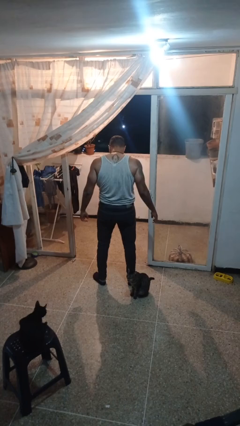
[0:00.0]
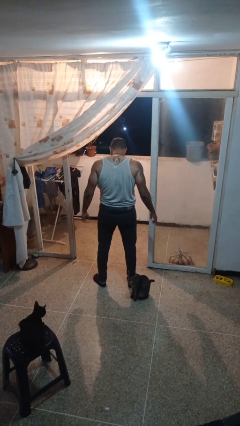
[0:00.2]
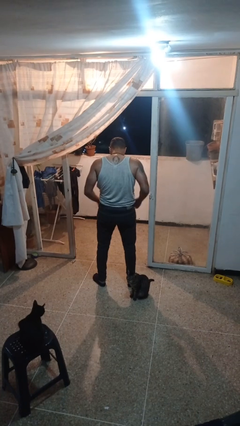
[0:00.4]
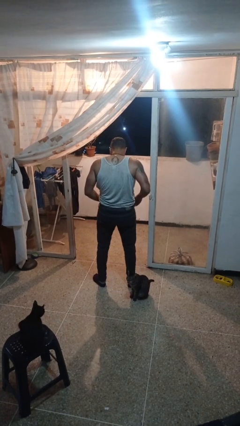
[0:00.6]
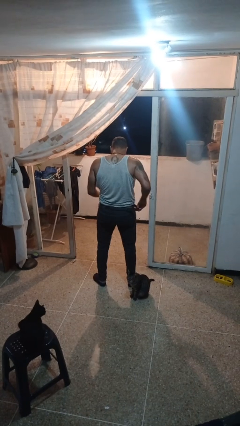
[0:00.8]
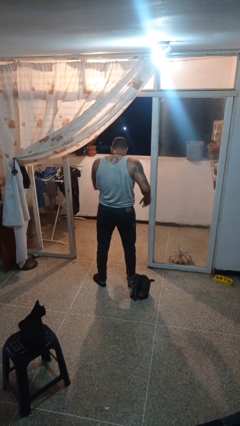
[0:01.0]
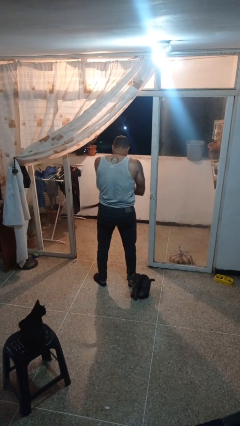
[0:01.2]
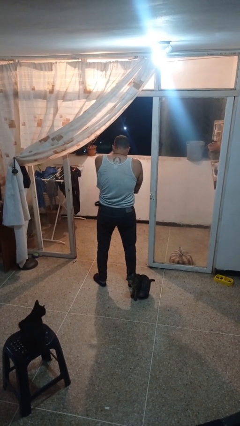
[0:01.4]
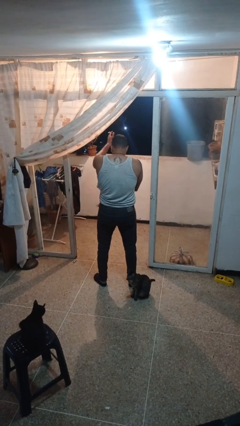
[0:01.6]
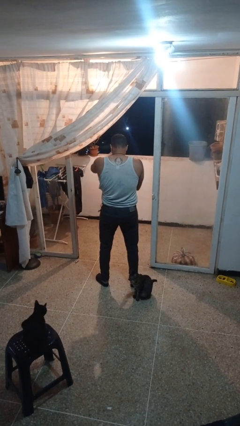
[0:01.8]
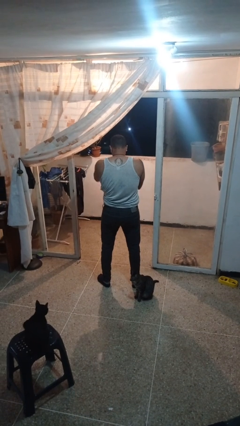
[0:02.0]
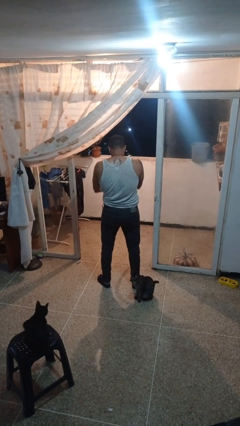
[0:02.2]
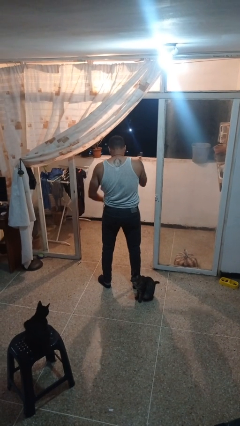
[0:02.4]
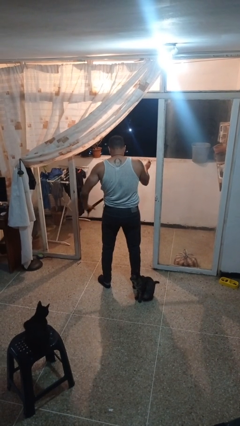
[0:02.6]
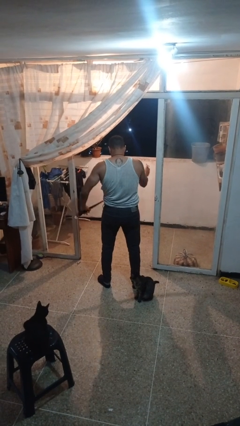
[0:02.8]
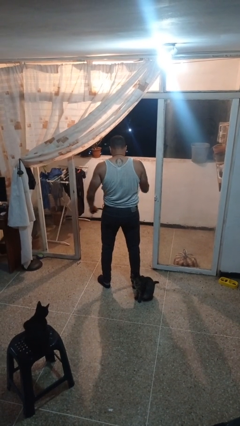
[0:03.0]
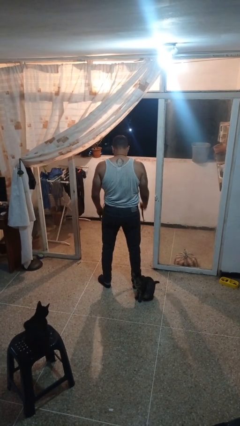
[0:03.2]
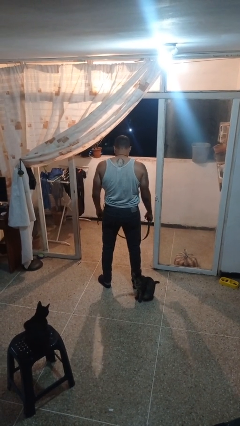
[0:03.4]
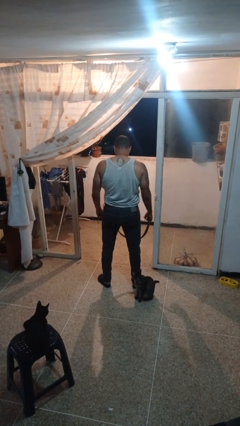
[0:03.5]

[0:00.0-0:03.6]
person takes off belt

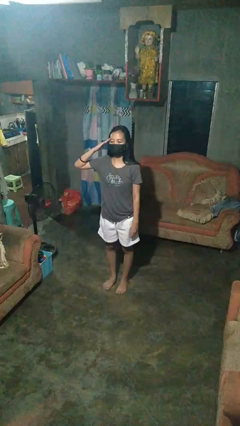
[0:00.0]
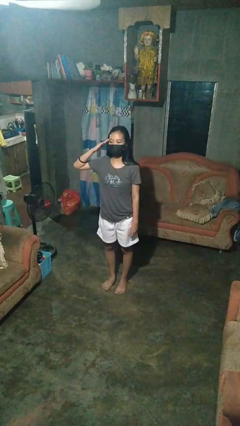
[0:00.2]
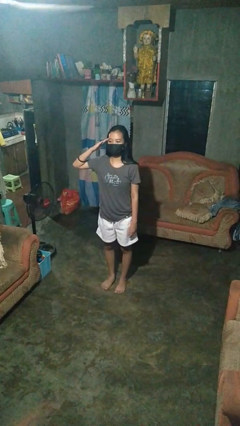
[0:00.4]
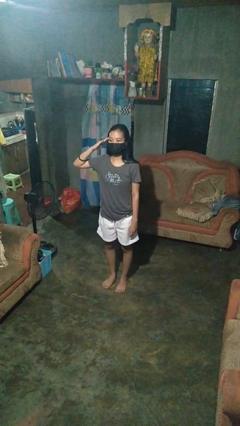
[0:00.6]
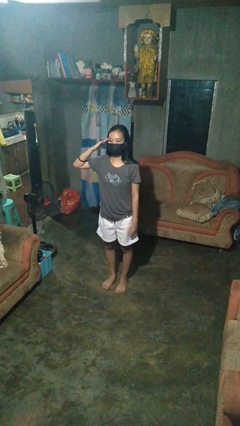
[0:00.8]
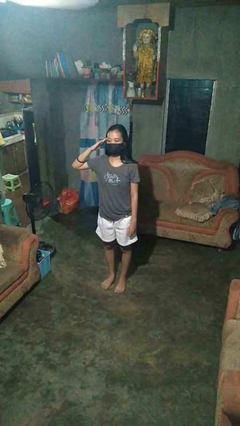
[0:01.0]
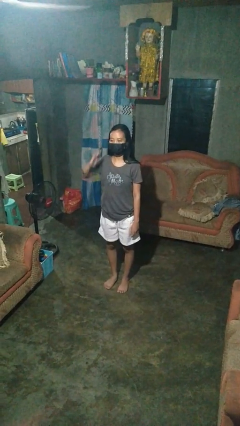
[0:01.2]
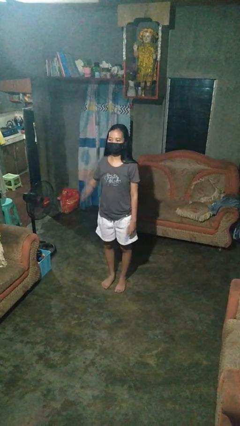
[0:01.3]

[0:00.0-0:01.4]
person salutes

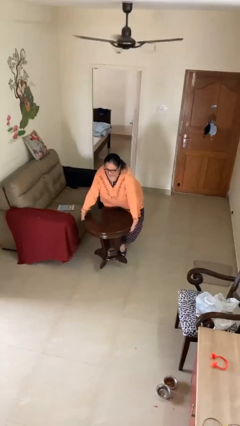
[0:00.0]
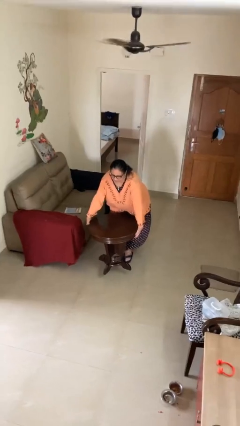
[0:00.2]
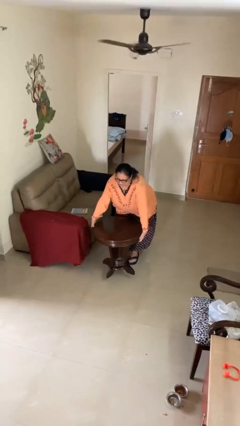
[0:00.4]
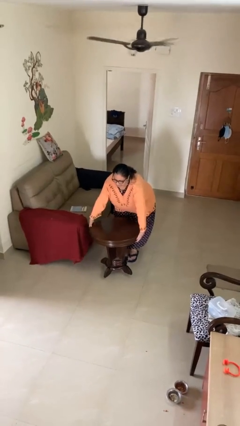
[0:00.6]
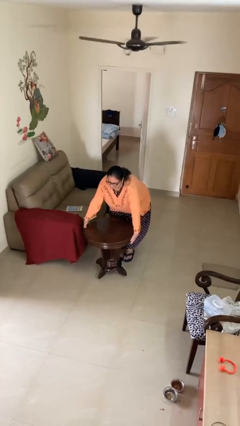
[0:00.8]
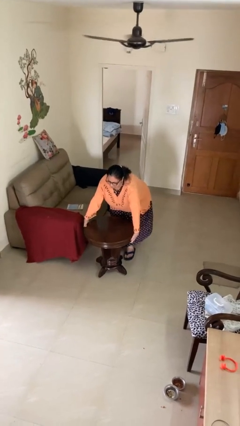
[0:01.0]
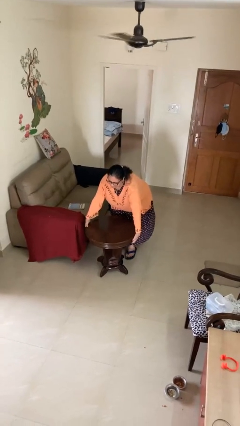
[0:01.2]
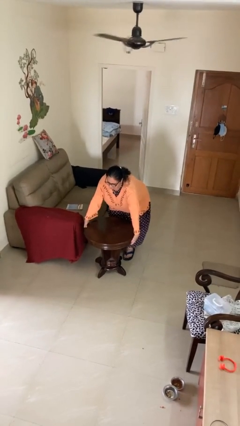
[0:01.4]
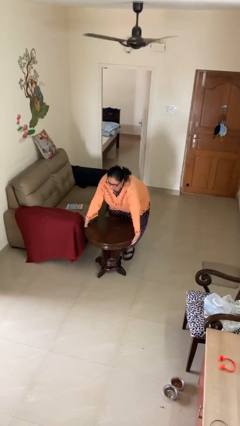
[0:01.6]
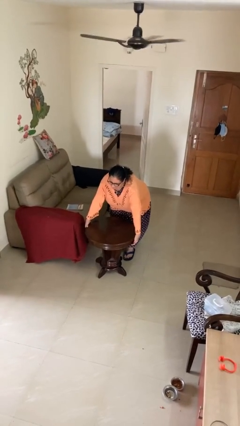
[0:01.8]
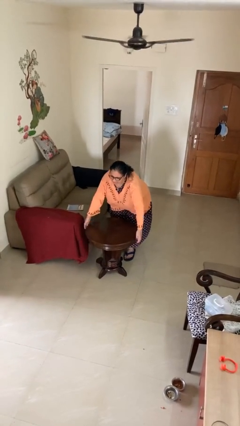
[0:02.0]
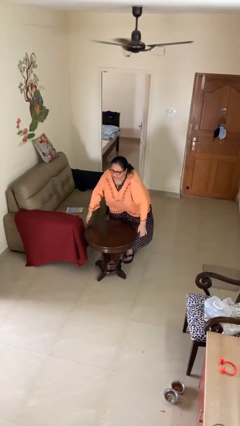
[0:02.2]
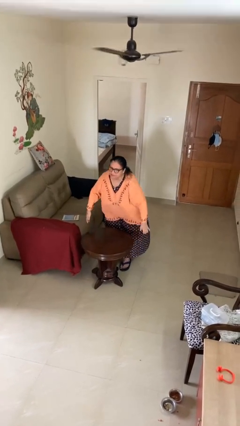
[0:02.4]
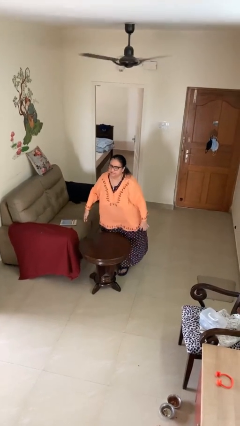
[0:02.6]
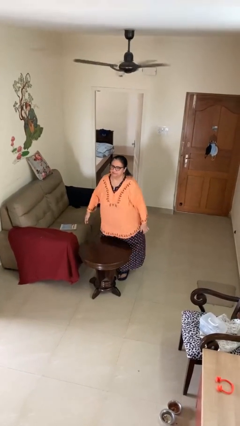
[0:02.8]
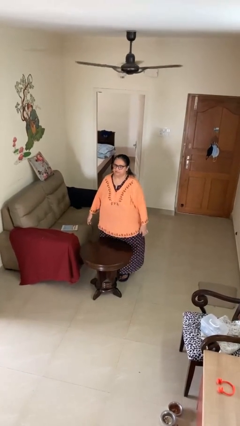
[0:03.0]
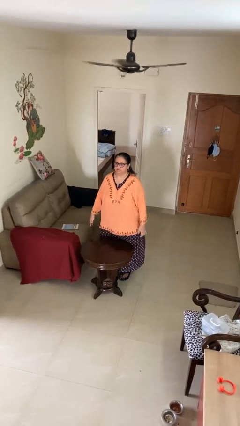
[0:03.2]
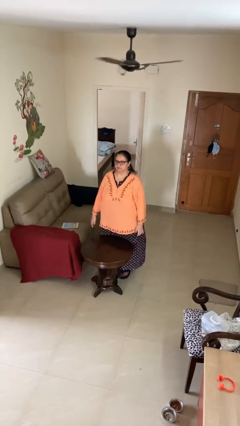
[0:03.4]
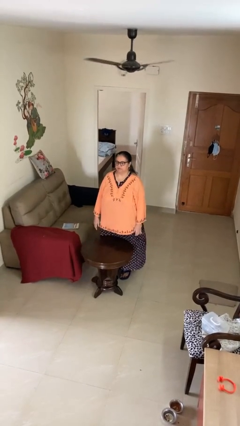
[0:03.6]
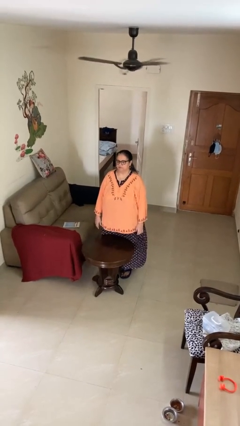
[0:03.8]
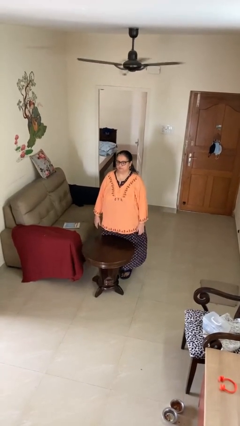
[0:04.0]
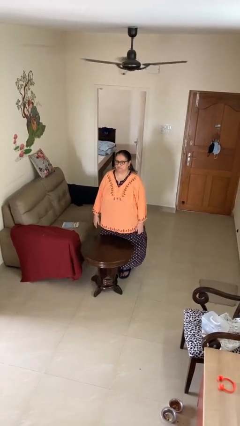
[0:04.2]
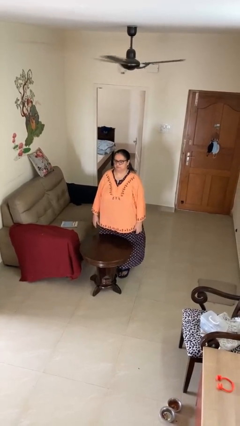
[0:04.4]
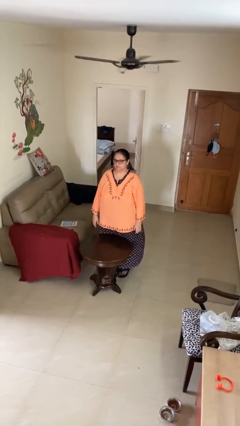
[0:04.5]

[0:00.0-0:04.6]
person puts down object on floor

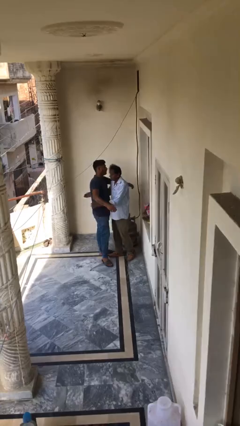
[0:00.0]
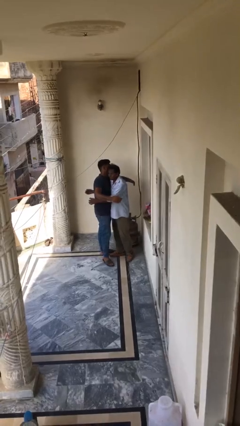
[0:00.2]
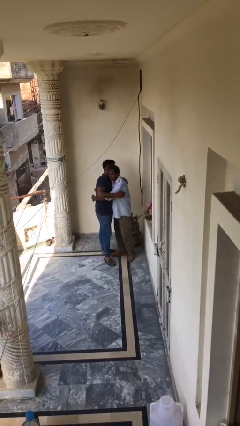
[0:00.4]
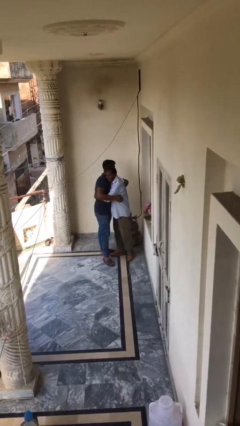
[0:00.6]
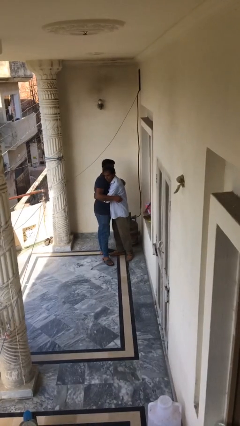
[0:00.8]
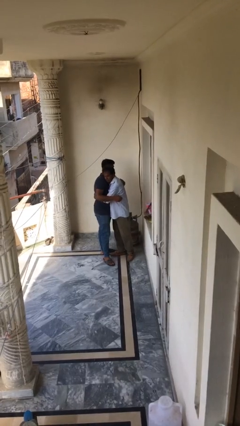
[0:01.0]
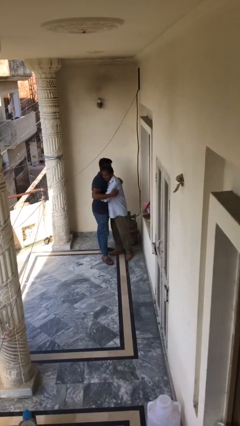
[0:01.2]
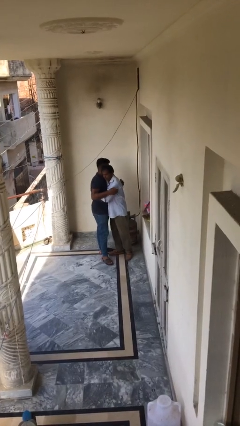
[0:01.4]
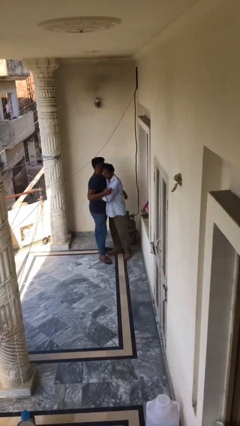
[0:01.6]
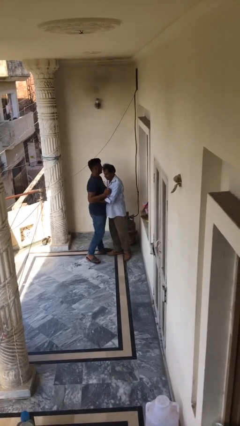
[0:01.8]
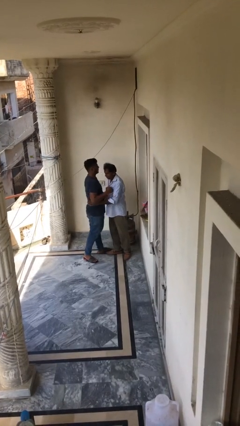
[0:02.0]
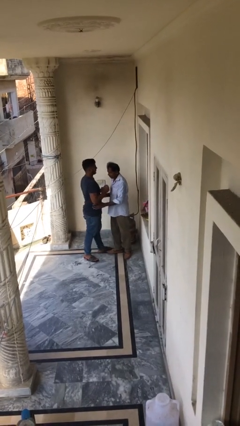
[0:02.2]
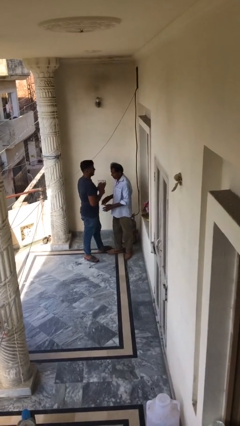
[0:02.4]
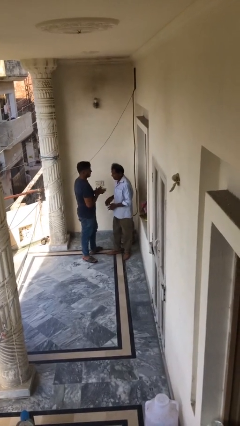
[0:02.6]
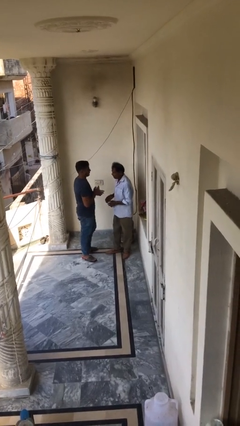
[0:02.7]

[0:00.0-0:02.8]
person embraces person

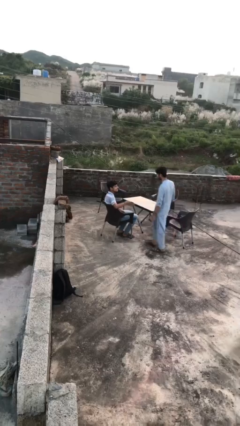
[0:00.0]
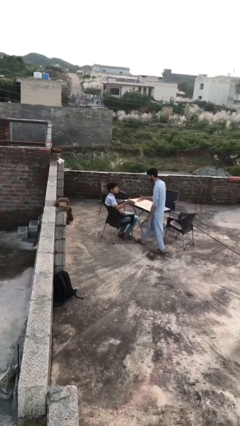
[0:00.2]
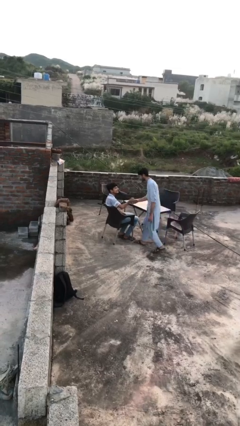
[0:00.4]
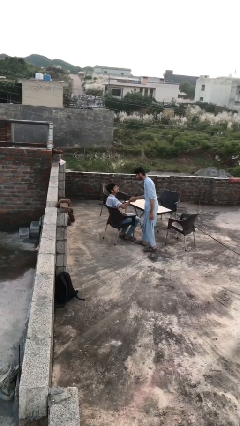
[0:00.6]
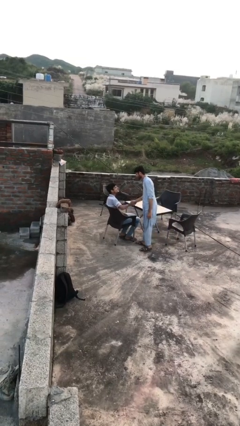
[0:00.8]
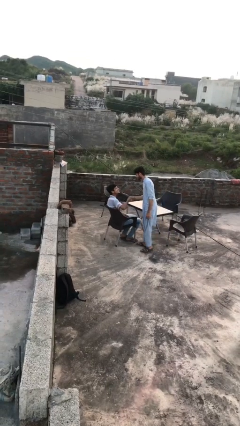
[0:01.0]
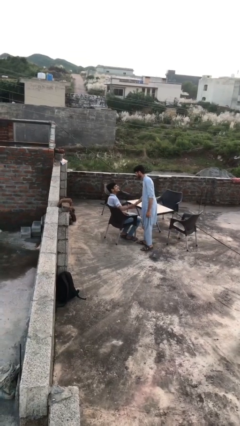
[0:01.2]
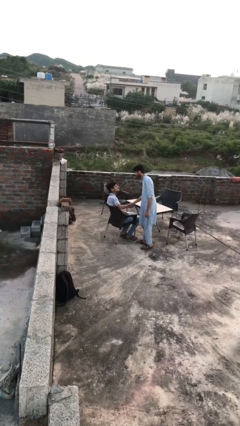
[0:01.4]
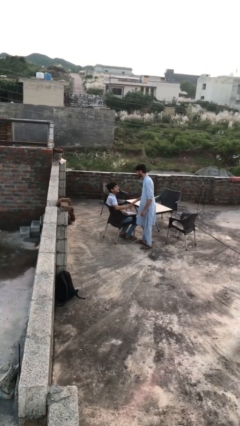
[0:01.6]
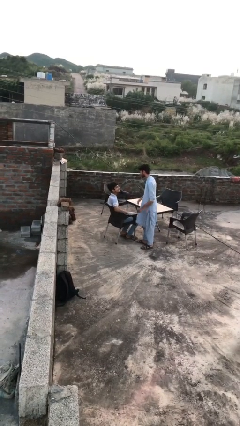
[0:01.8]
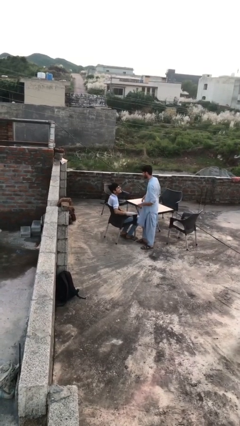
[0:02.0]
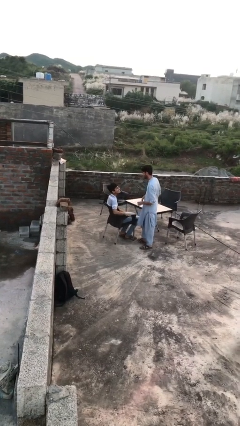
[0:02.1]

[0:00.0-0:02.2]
person shakes hand

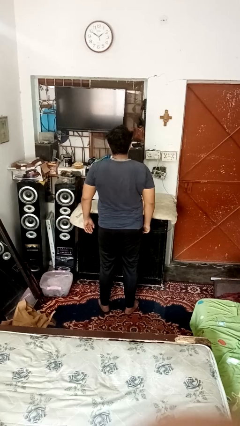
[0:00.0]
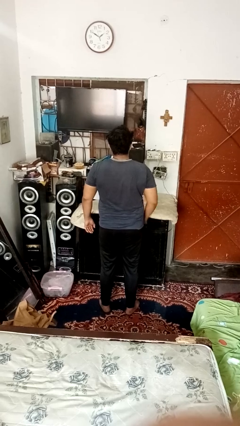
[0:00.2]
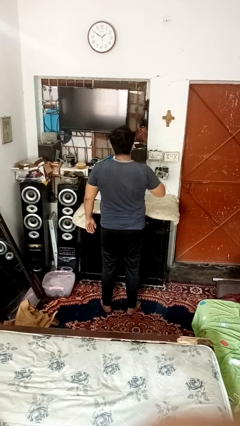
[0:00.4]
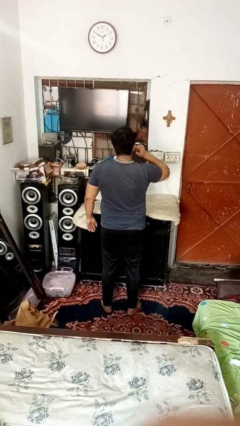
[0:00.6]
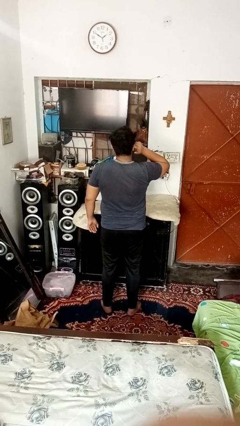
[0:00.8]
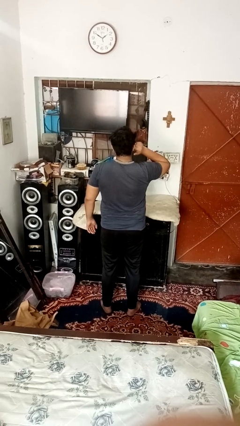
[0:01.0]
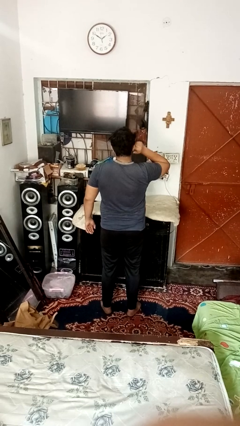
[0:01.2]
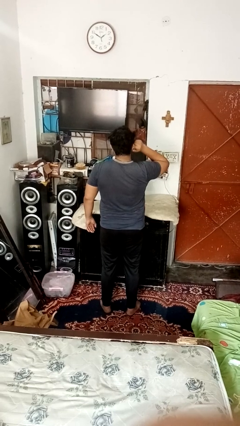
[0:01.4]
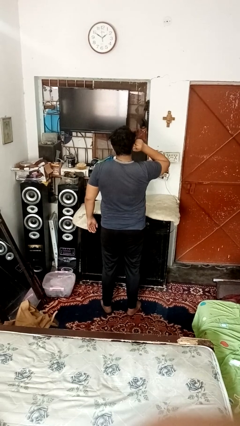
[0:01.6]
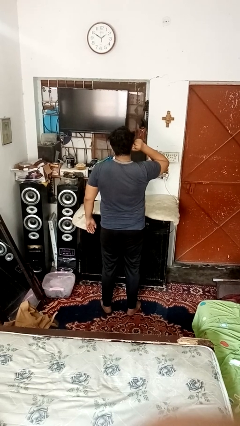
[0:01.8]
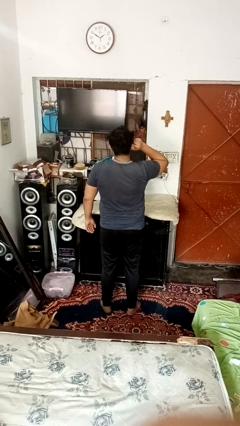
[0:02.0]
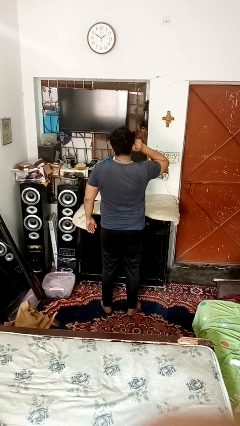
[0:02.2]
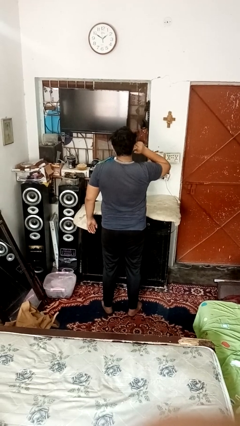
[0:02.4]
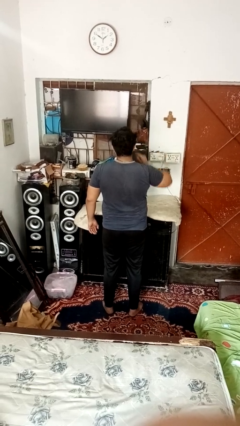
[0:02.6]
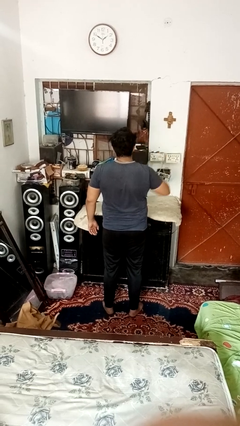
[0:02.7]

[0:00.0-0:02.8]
person puts fingers in ear
